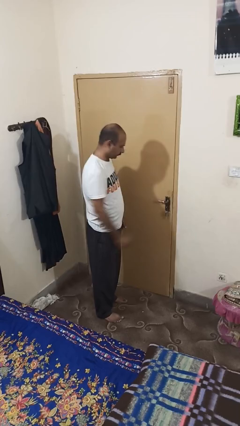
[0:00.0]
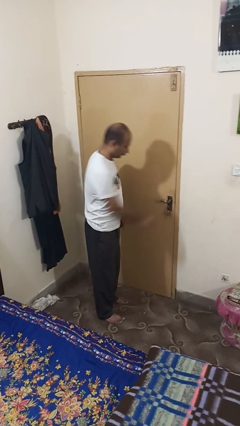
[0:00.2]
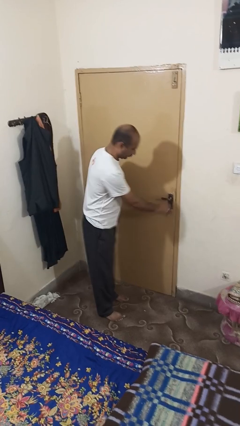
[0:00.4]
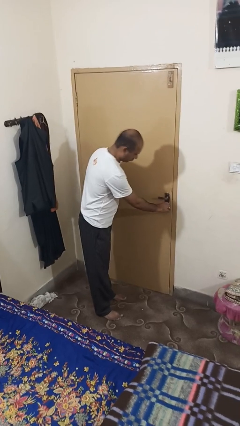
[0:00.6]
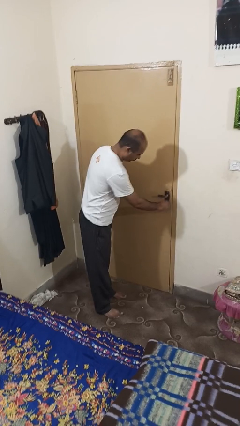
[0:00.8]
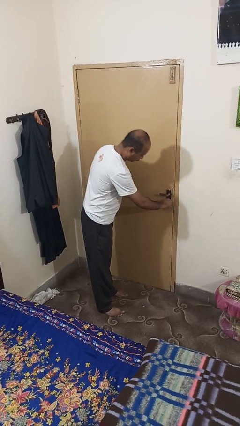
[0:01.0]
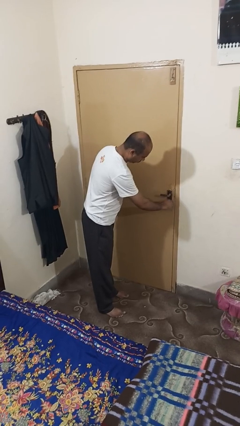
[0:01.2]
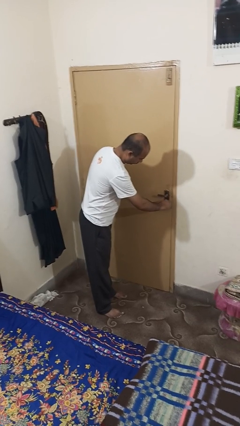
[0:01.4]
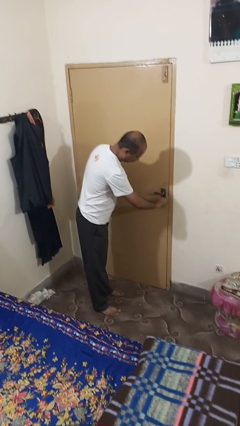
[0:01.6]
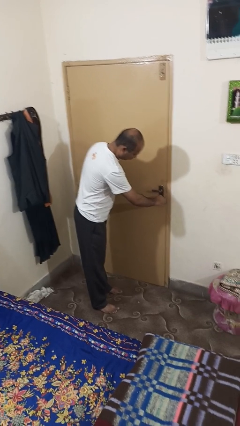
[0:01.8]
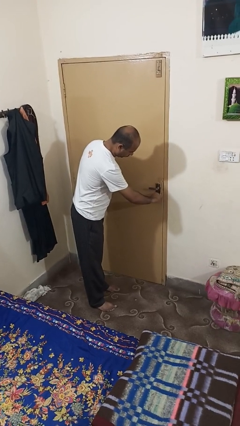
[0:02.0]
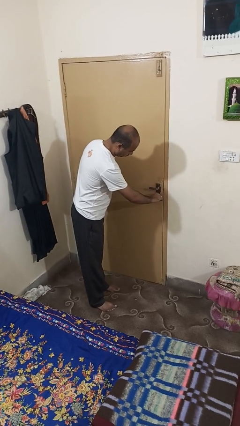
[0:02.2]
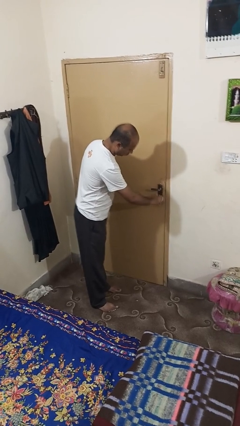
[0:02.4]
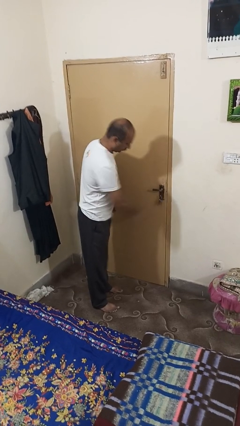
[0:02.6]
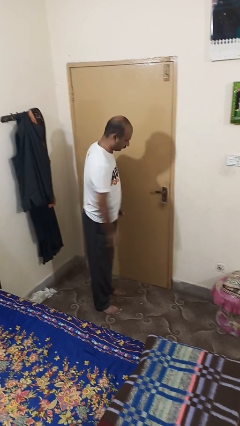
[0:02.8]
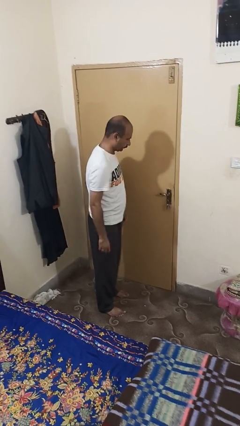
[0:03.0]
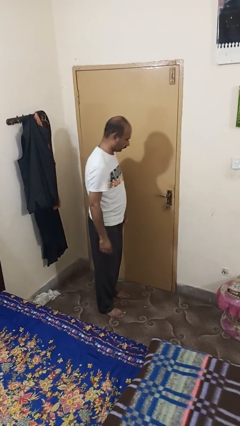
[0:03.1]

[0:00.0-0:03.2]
person unlocks door with keys

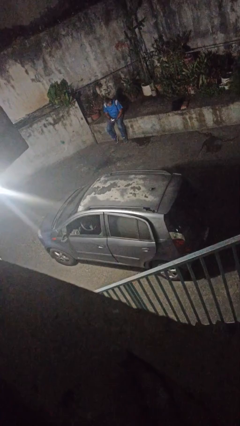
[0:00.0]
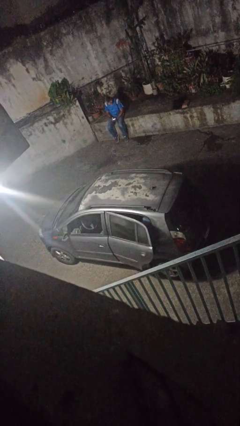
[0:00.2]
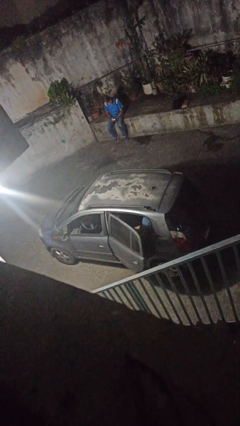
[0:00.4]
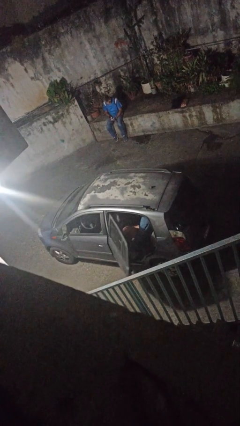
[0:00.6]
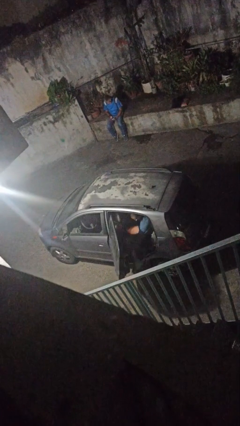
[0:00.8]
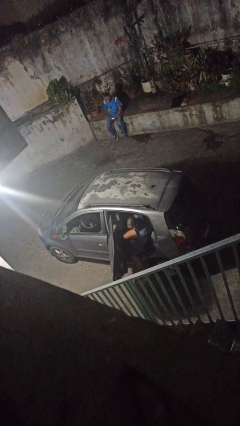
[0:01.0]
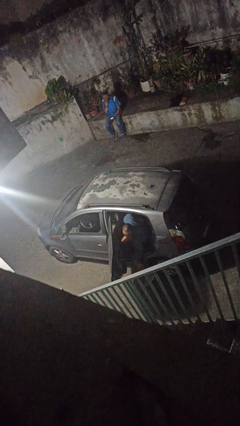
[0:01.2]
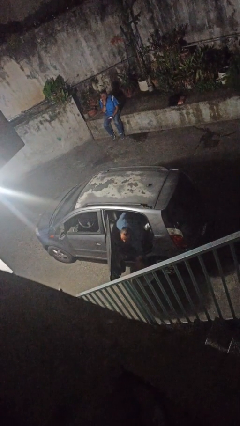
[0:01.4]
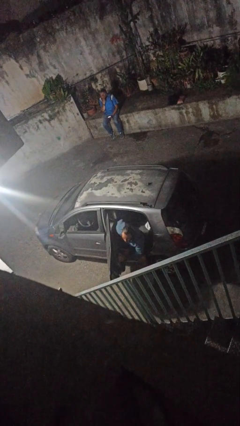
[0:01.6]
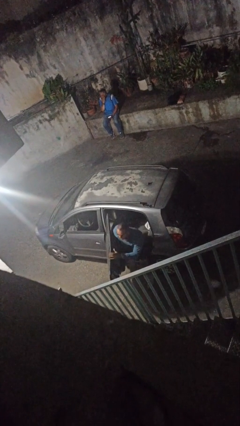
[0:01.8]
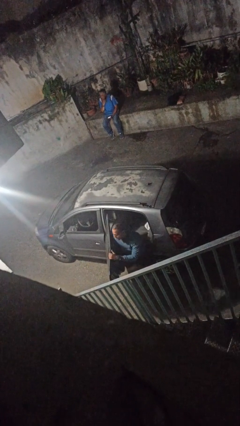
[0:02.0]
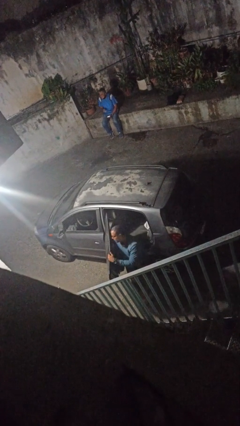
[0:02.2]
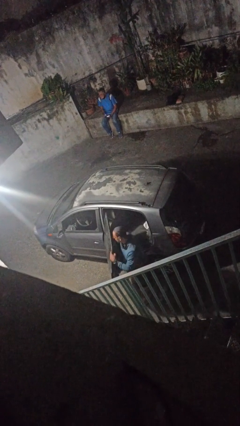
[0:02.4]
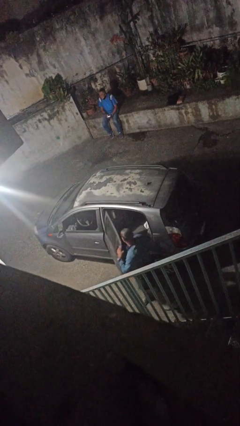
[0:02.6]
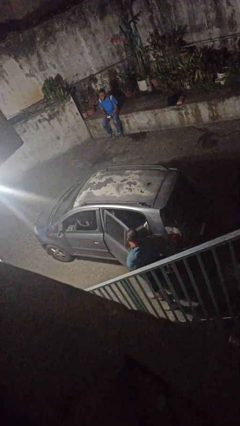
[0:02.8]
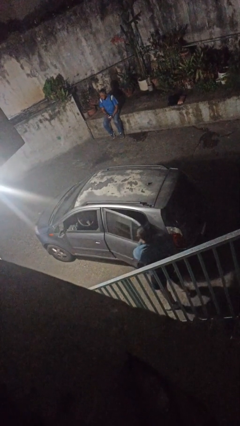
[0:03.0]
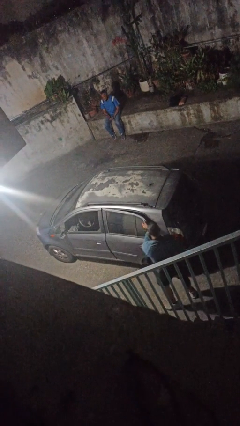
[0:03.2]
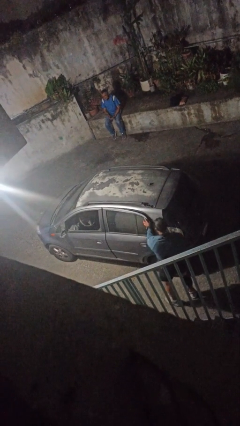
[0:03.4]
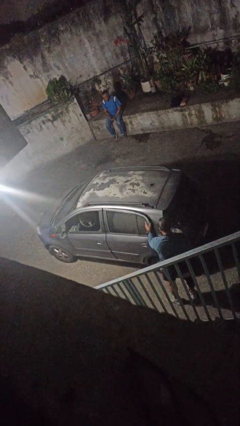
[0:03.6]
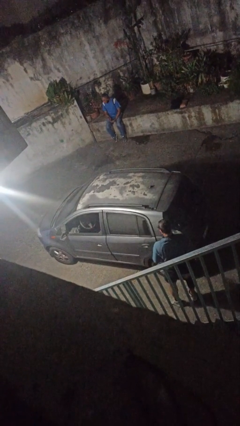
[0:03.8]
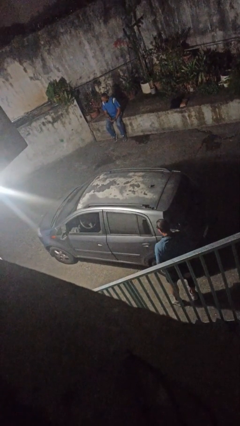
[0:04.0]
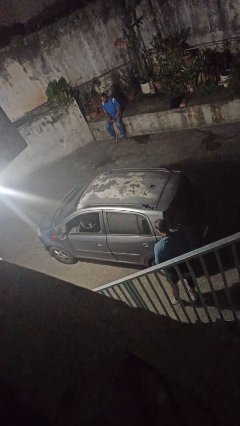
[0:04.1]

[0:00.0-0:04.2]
car drops off person

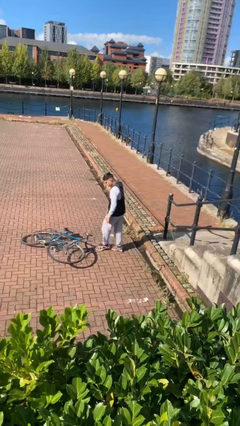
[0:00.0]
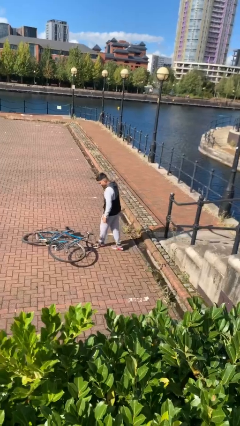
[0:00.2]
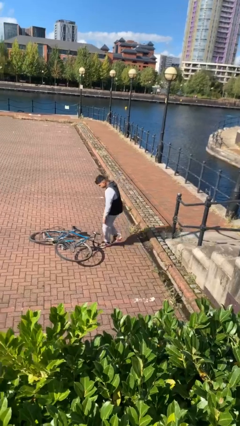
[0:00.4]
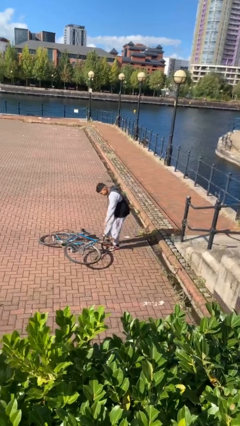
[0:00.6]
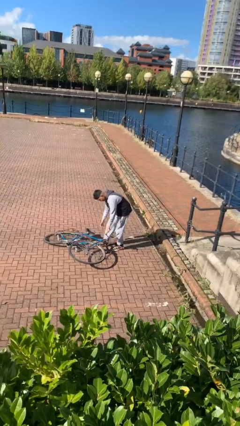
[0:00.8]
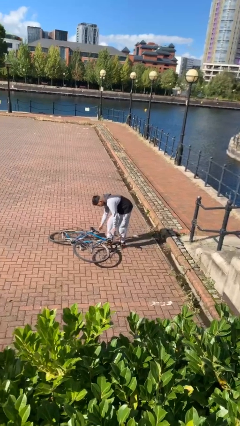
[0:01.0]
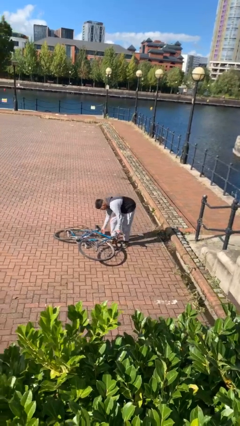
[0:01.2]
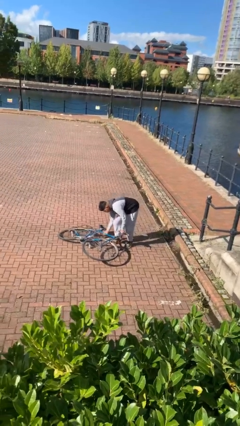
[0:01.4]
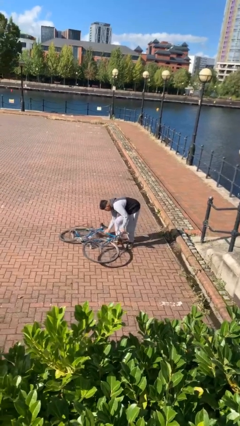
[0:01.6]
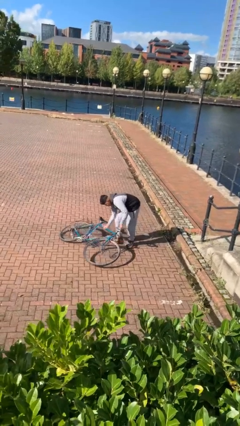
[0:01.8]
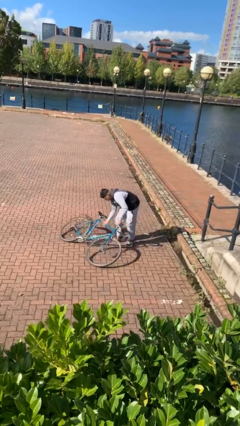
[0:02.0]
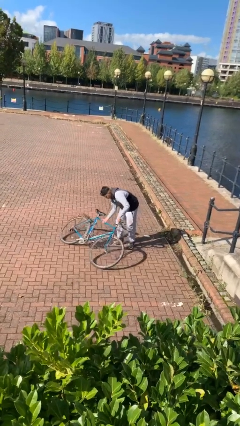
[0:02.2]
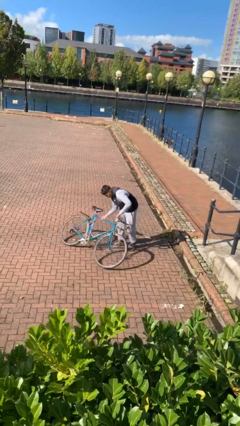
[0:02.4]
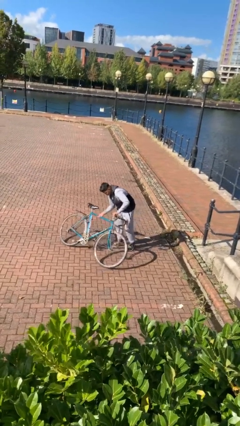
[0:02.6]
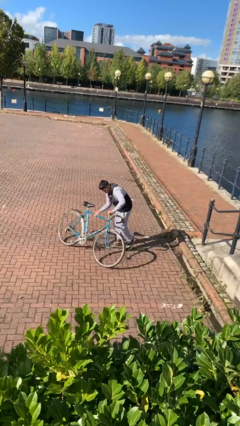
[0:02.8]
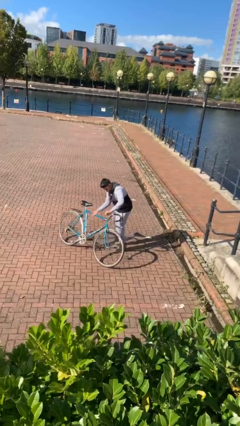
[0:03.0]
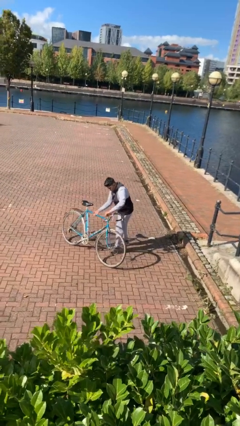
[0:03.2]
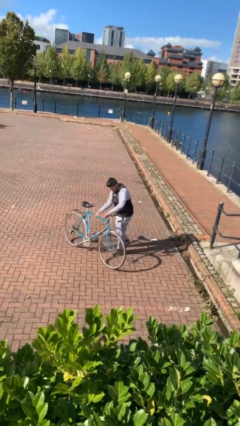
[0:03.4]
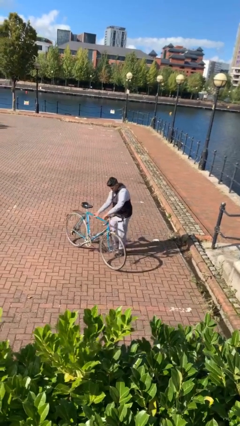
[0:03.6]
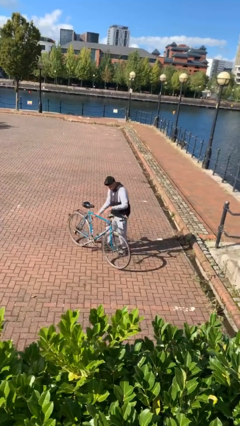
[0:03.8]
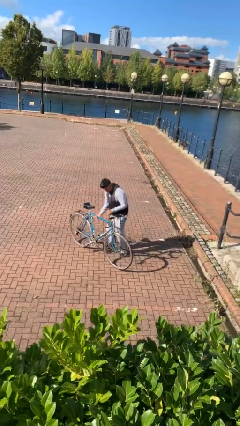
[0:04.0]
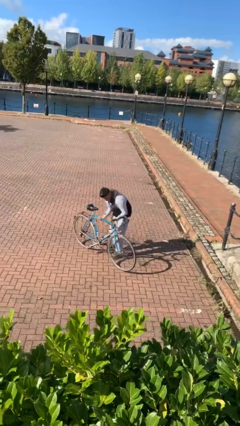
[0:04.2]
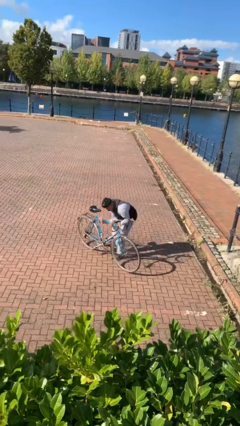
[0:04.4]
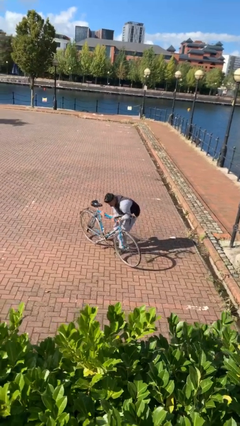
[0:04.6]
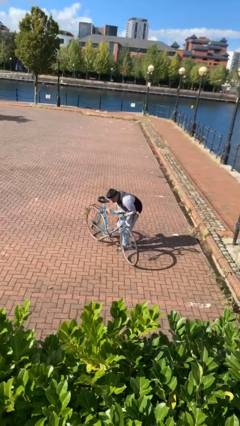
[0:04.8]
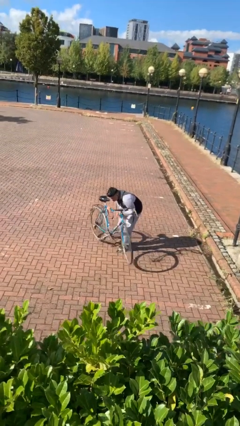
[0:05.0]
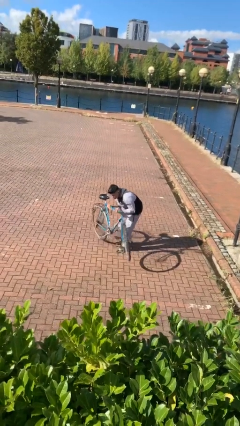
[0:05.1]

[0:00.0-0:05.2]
person picks up object from floor

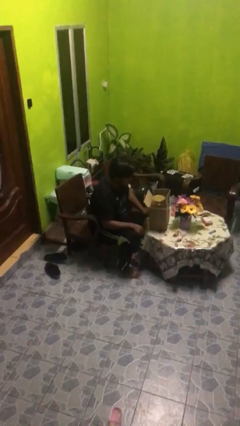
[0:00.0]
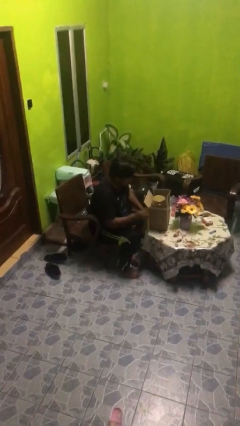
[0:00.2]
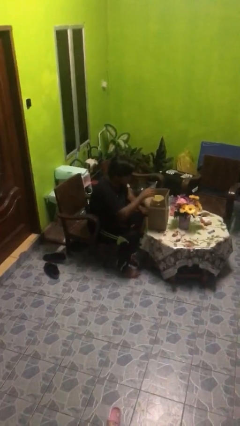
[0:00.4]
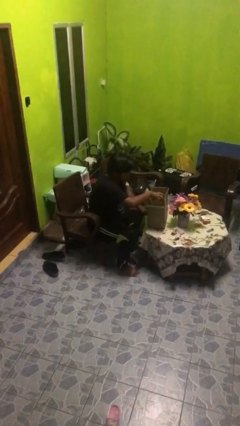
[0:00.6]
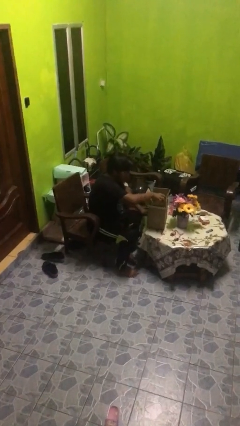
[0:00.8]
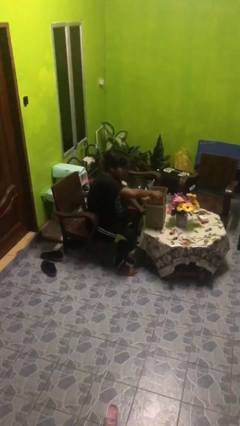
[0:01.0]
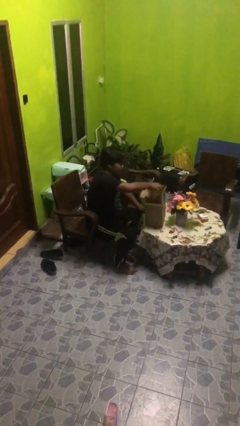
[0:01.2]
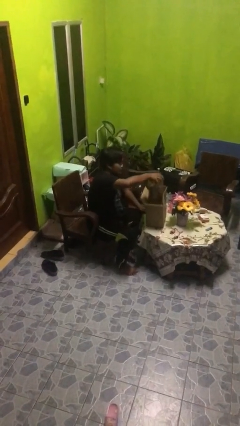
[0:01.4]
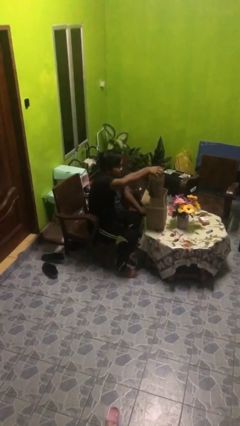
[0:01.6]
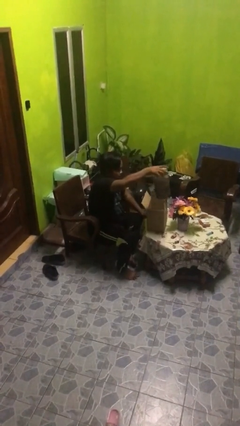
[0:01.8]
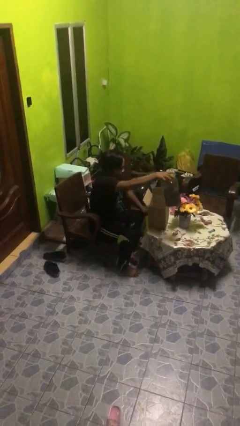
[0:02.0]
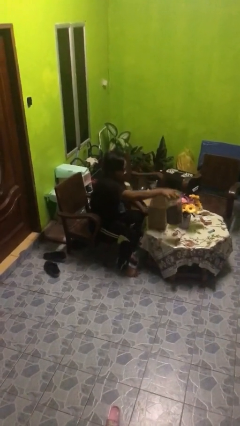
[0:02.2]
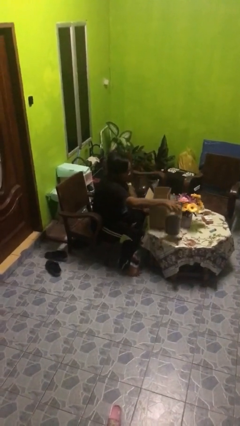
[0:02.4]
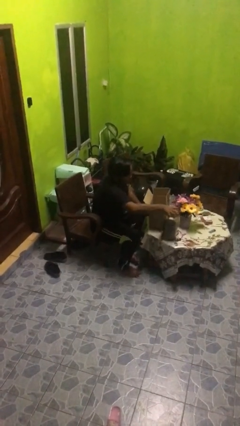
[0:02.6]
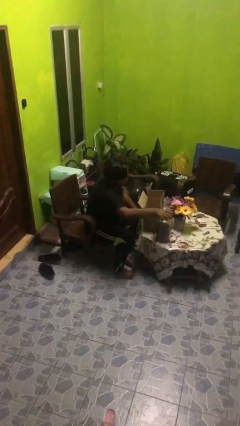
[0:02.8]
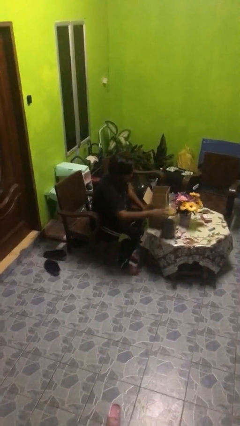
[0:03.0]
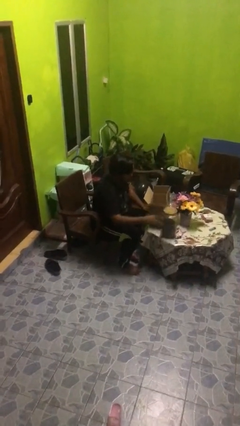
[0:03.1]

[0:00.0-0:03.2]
person takes object from box

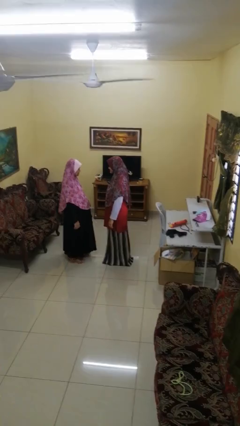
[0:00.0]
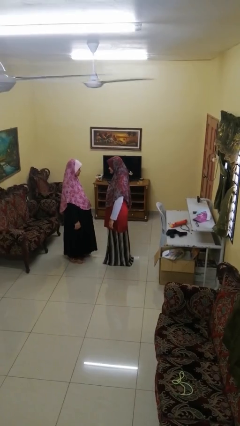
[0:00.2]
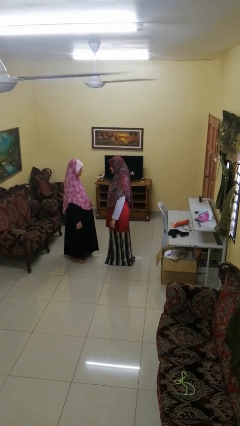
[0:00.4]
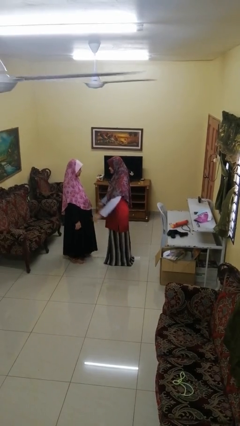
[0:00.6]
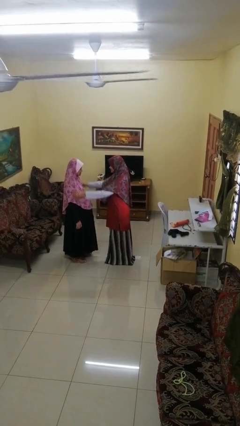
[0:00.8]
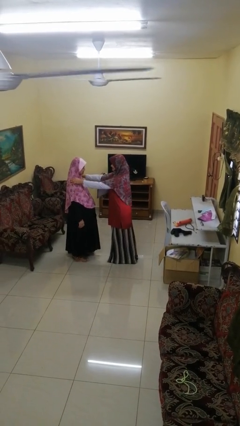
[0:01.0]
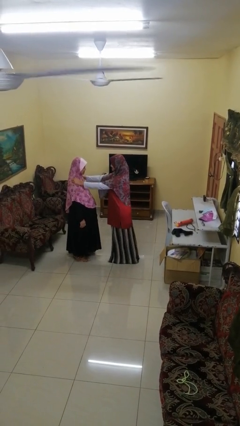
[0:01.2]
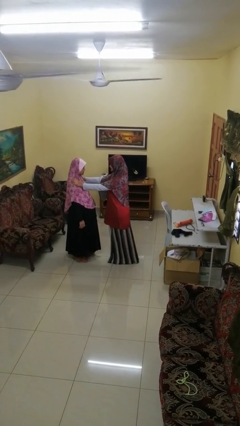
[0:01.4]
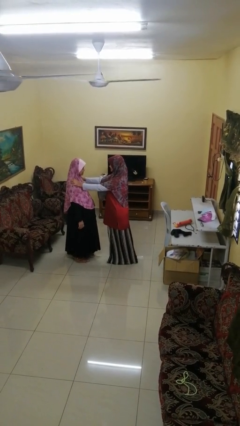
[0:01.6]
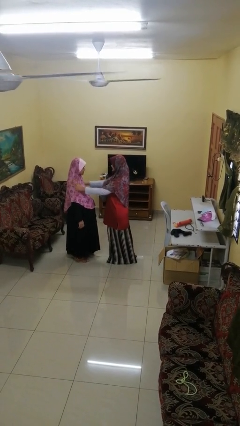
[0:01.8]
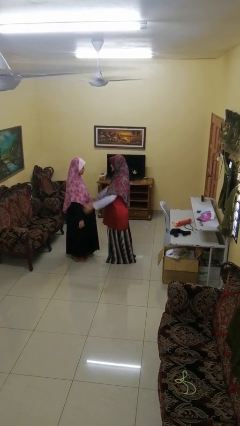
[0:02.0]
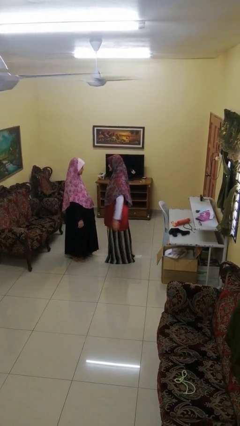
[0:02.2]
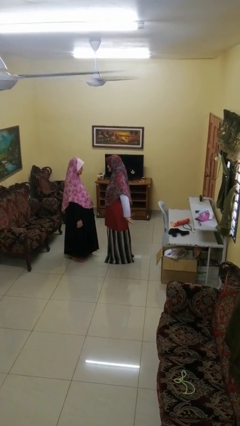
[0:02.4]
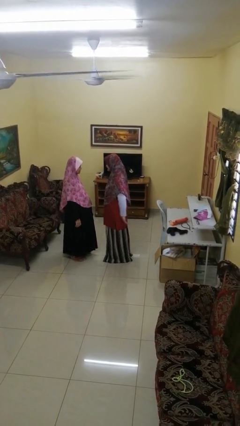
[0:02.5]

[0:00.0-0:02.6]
person pounds shoulders of person
